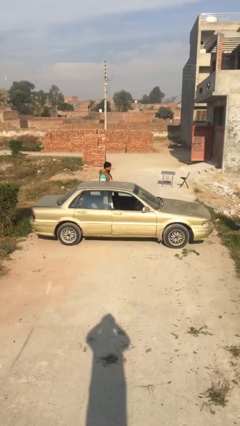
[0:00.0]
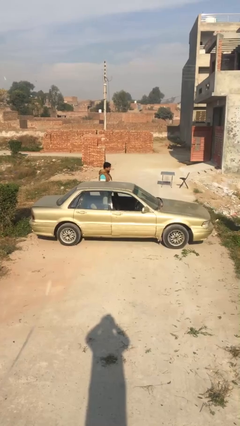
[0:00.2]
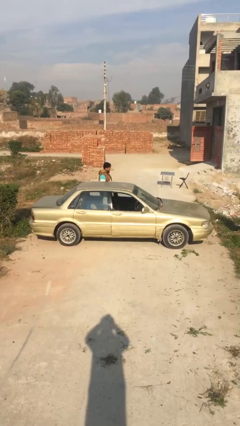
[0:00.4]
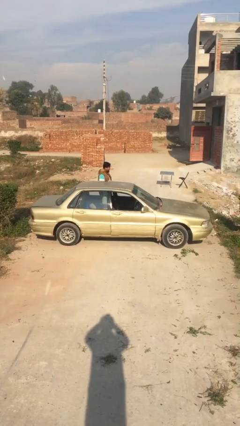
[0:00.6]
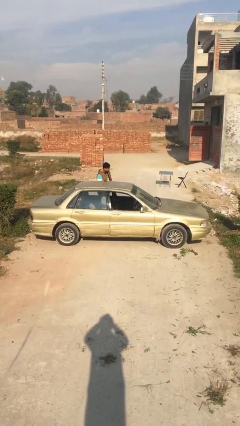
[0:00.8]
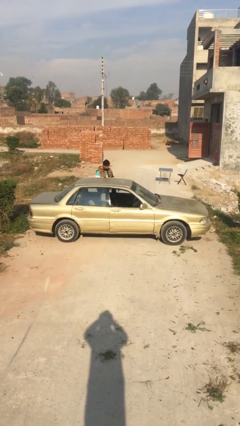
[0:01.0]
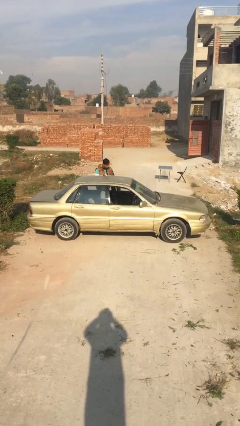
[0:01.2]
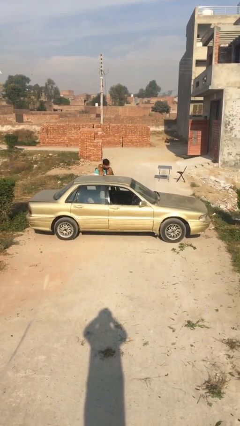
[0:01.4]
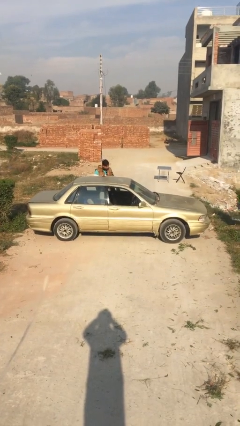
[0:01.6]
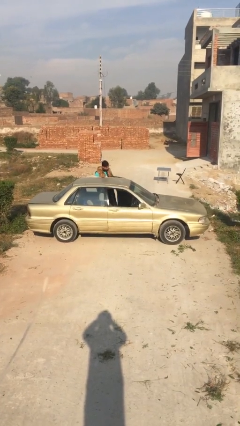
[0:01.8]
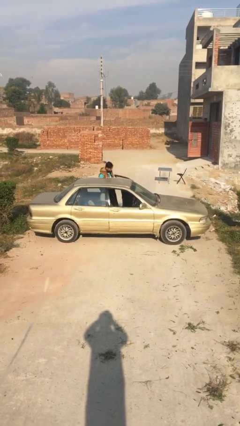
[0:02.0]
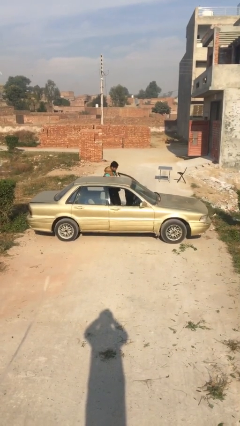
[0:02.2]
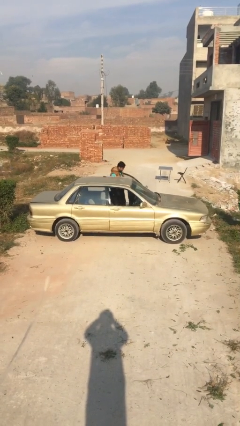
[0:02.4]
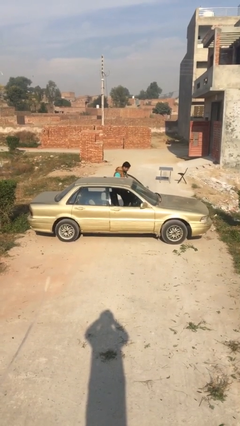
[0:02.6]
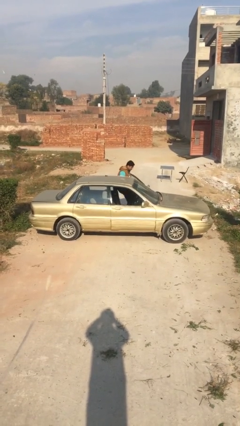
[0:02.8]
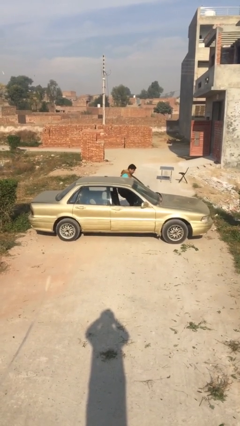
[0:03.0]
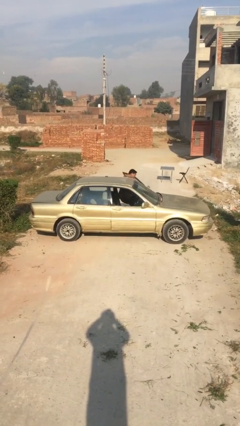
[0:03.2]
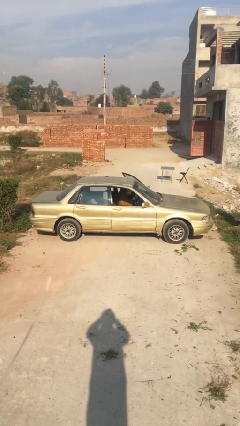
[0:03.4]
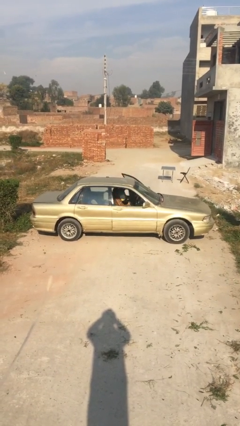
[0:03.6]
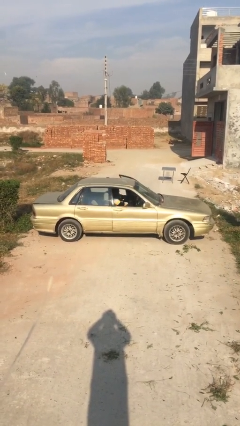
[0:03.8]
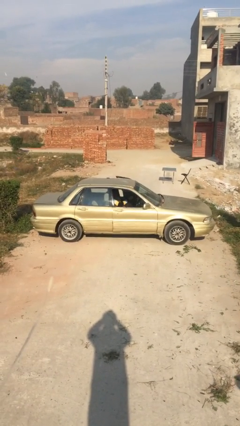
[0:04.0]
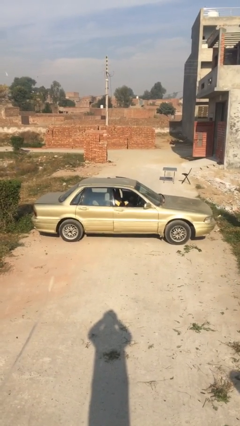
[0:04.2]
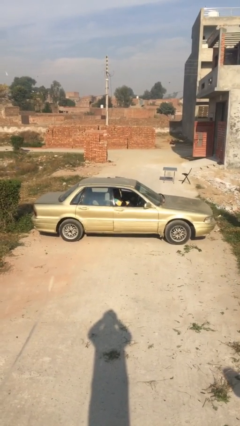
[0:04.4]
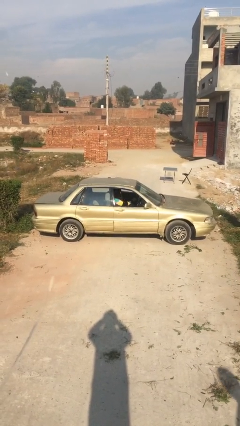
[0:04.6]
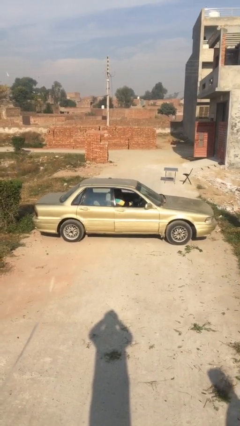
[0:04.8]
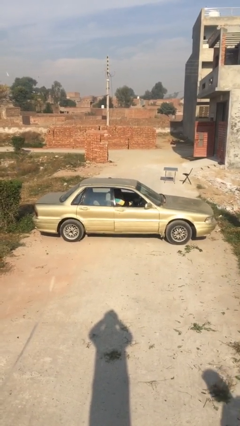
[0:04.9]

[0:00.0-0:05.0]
car picks up person

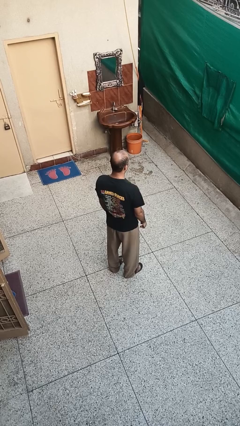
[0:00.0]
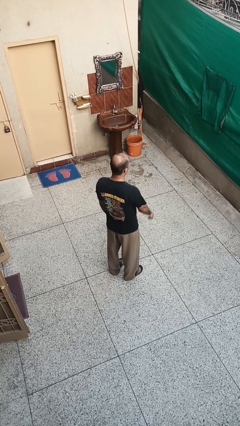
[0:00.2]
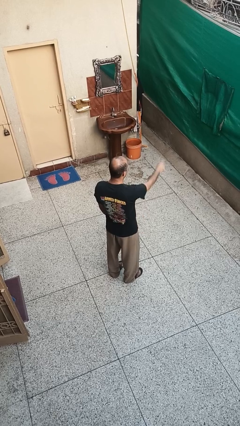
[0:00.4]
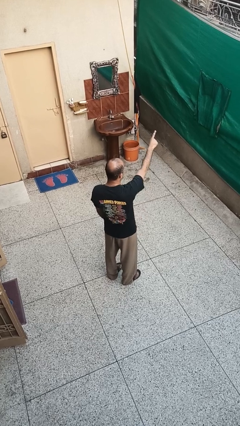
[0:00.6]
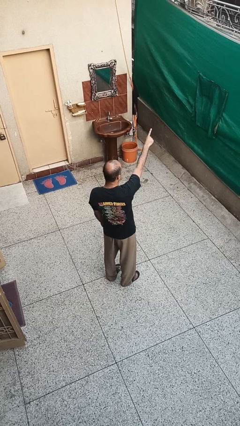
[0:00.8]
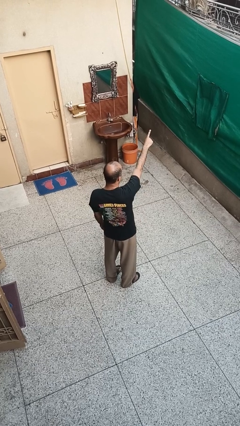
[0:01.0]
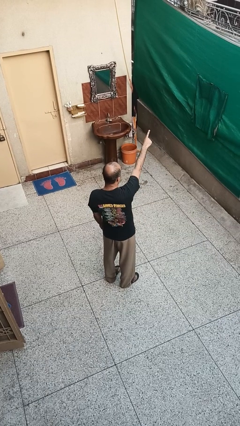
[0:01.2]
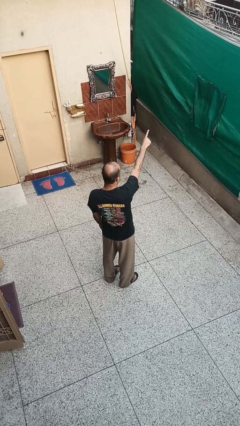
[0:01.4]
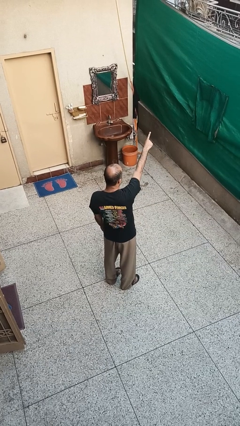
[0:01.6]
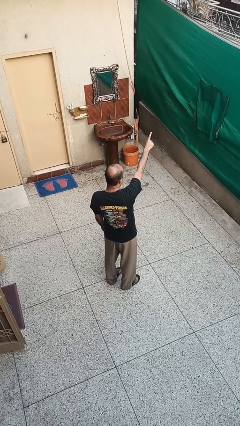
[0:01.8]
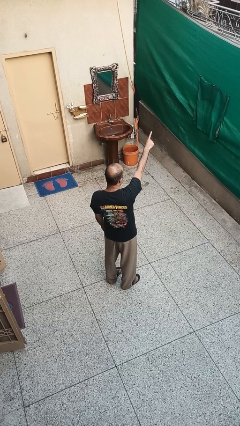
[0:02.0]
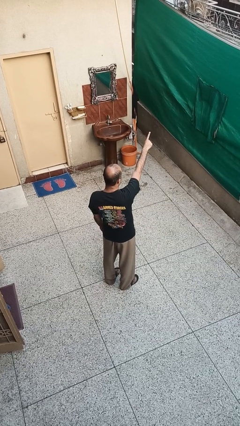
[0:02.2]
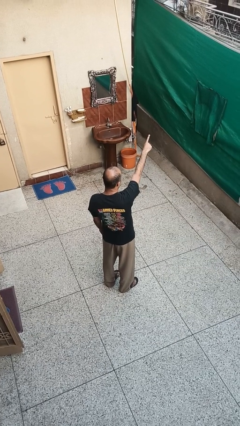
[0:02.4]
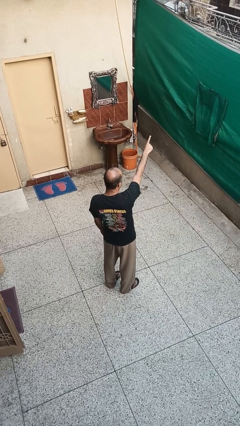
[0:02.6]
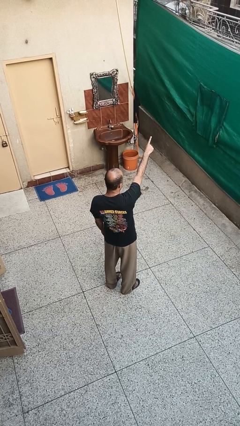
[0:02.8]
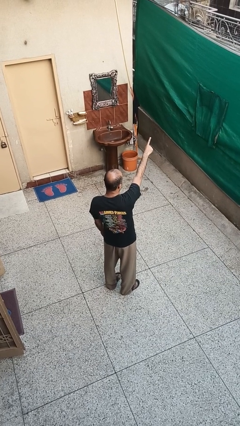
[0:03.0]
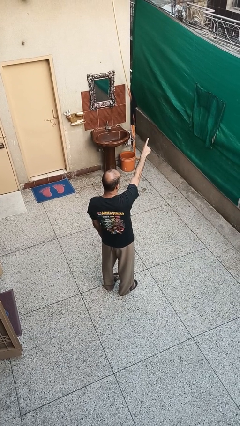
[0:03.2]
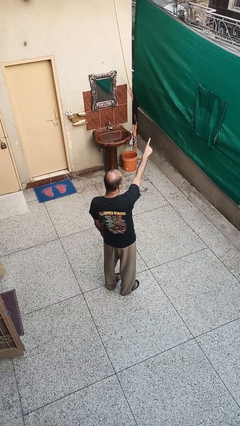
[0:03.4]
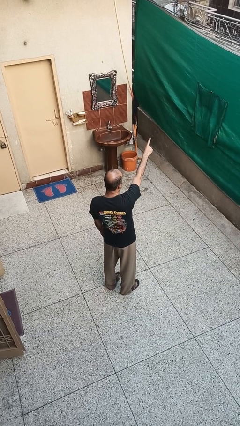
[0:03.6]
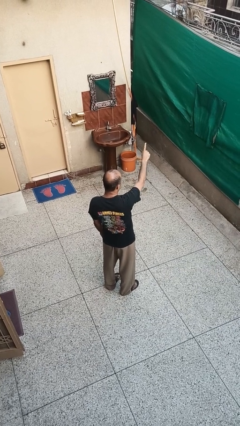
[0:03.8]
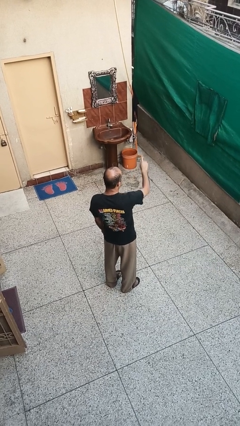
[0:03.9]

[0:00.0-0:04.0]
person points at person

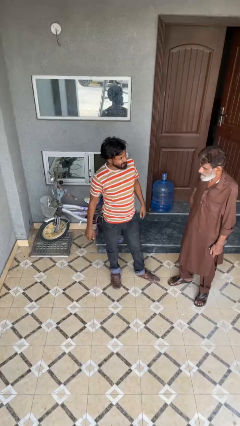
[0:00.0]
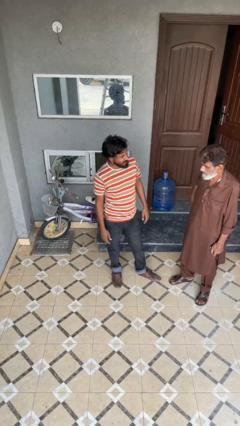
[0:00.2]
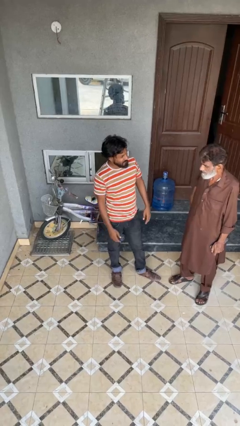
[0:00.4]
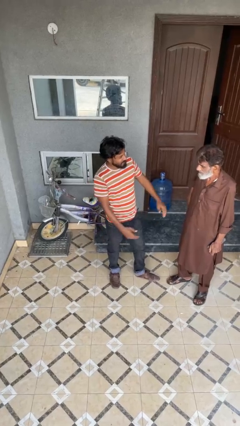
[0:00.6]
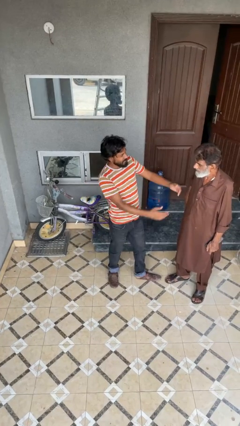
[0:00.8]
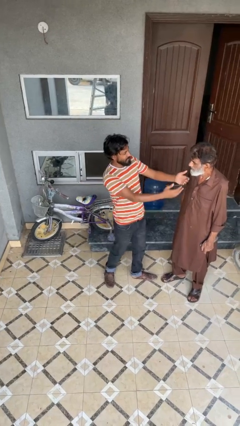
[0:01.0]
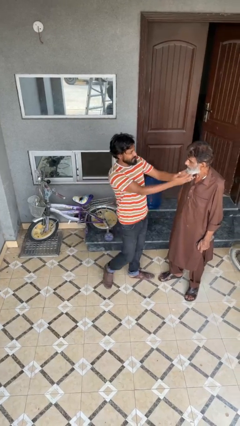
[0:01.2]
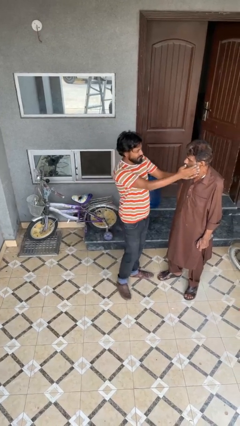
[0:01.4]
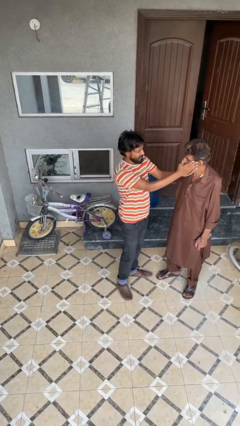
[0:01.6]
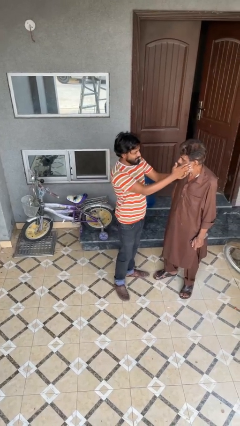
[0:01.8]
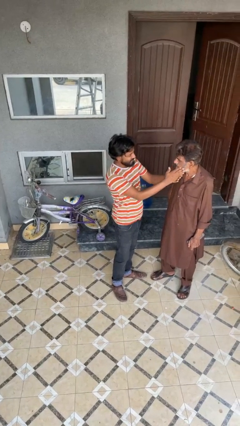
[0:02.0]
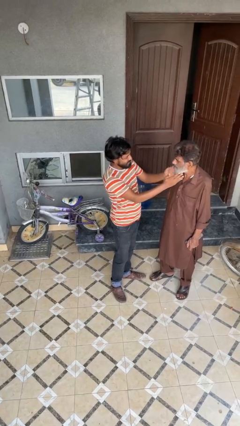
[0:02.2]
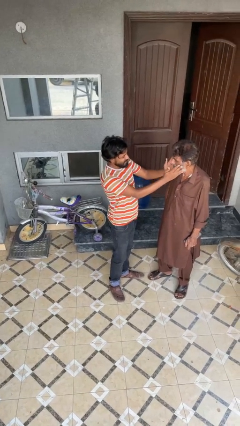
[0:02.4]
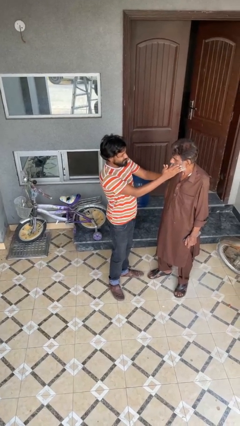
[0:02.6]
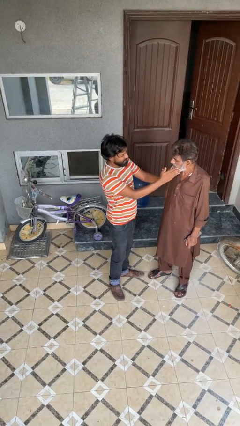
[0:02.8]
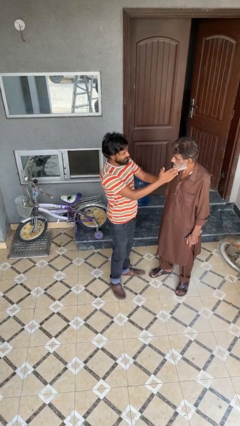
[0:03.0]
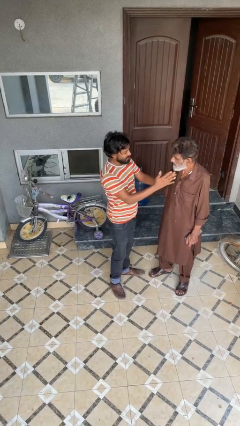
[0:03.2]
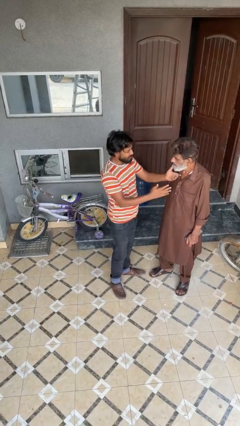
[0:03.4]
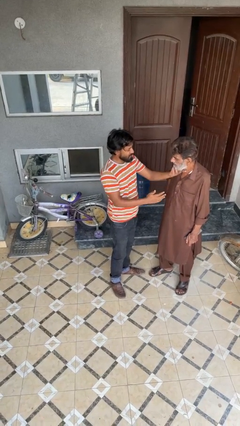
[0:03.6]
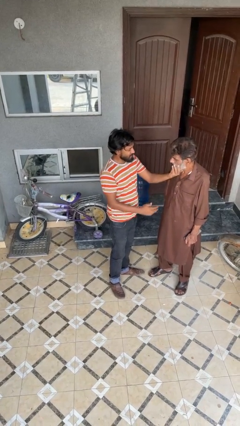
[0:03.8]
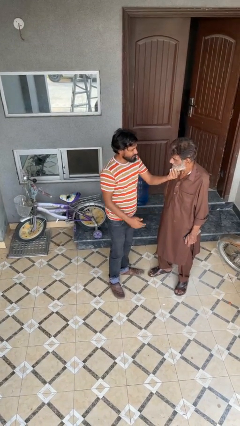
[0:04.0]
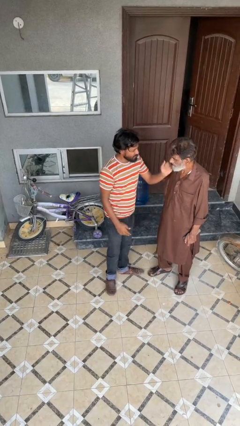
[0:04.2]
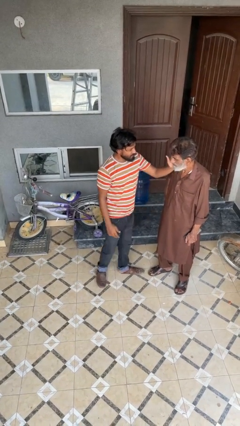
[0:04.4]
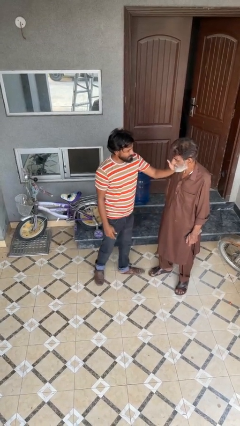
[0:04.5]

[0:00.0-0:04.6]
person touches face of person

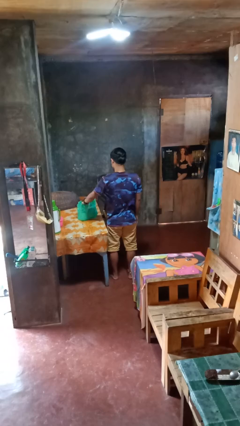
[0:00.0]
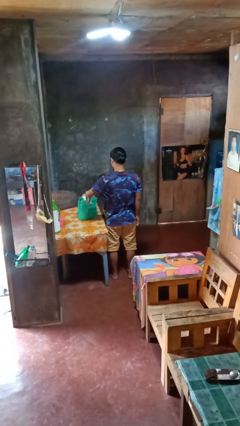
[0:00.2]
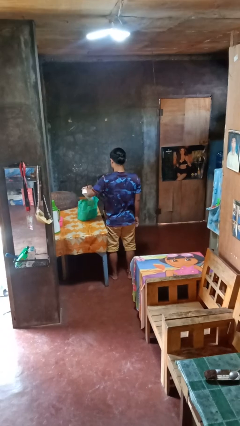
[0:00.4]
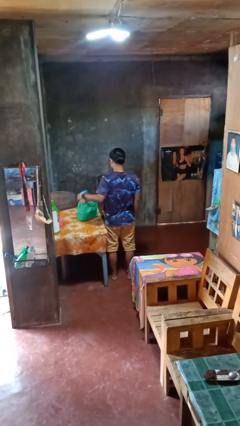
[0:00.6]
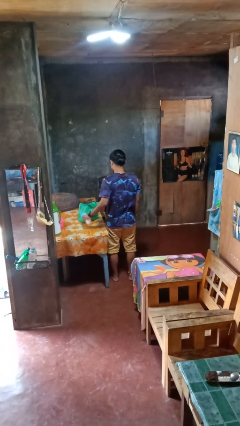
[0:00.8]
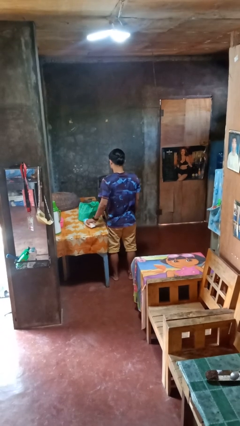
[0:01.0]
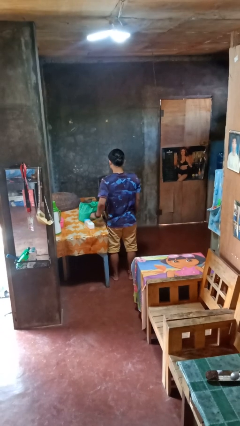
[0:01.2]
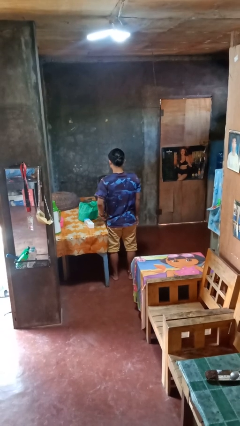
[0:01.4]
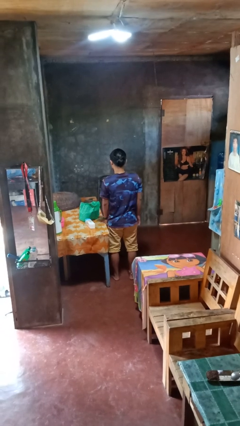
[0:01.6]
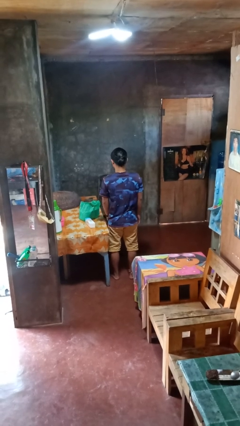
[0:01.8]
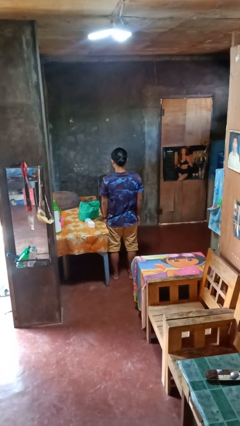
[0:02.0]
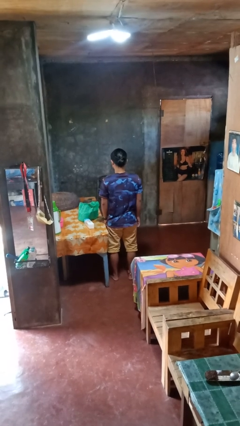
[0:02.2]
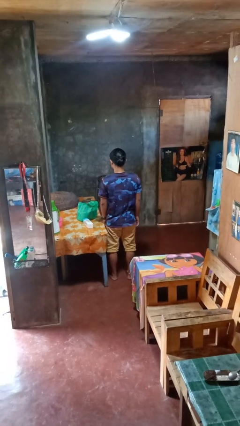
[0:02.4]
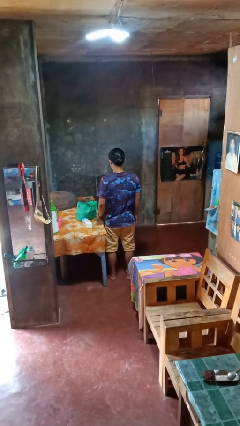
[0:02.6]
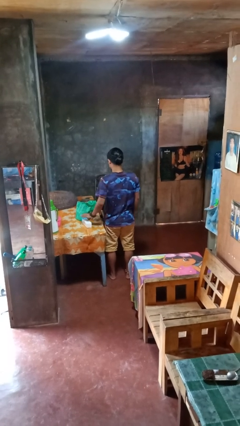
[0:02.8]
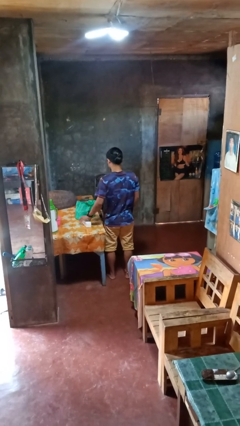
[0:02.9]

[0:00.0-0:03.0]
person takes object from bag

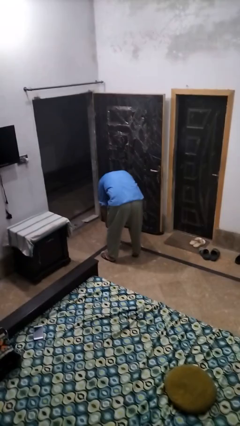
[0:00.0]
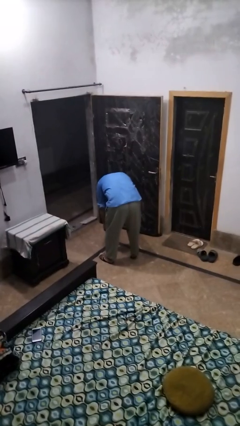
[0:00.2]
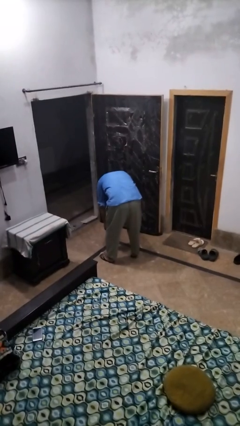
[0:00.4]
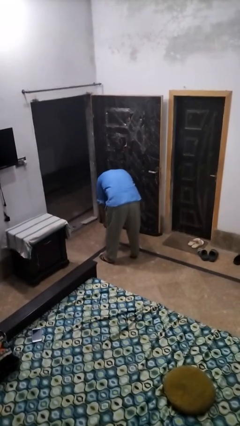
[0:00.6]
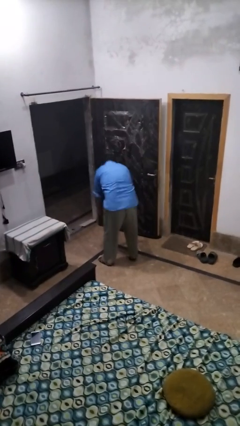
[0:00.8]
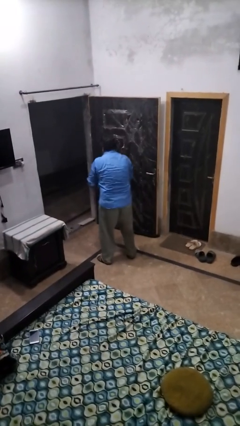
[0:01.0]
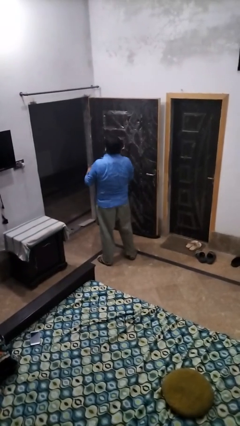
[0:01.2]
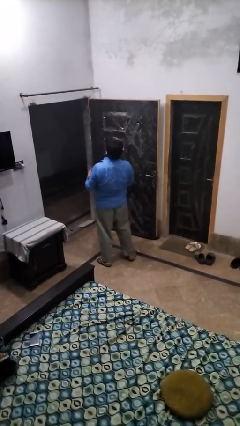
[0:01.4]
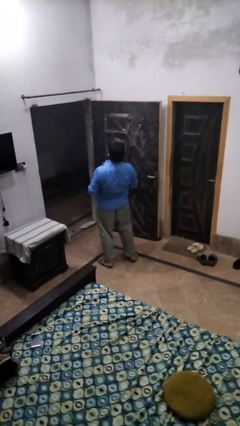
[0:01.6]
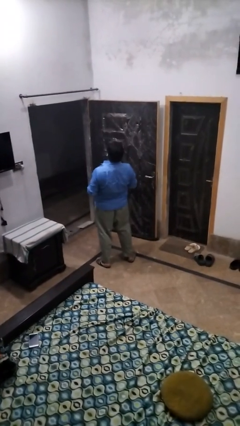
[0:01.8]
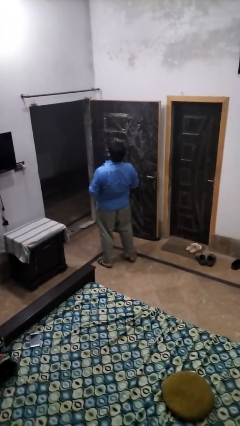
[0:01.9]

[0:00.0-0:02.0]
person picks up object from floor
